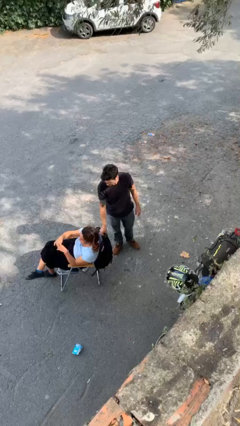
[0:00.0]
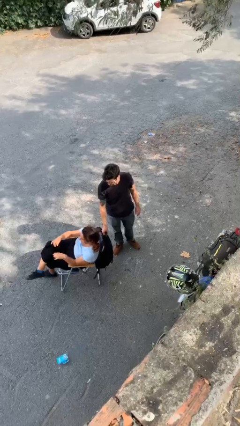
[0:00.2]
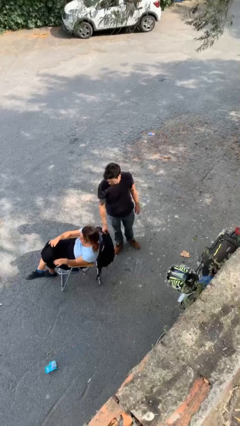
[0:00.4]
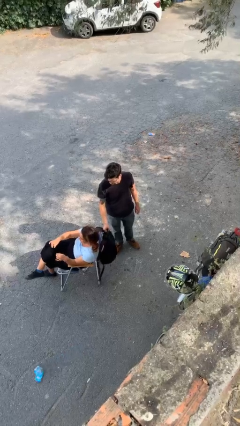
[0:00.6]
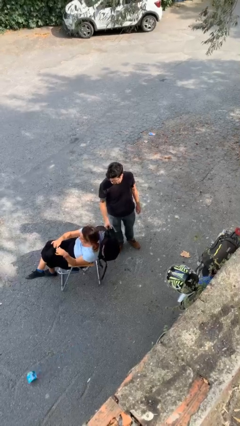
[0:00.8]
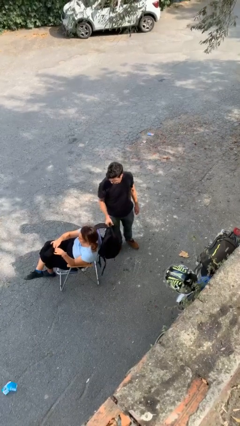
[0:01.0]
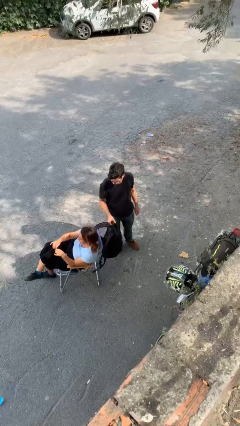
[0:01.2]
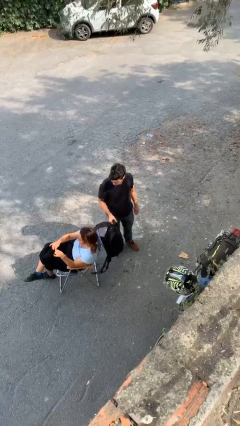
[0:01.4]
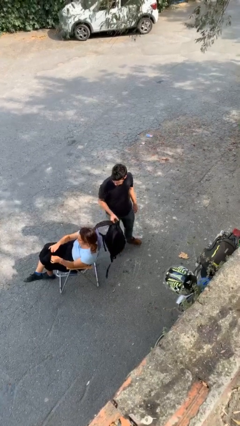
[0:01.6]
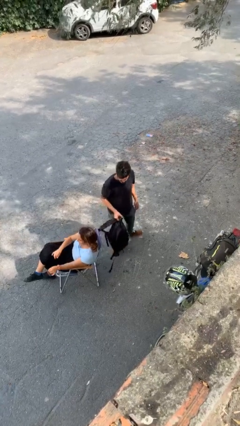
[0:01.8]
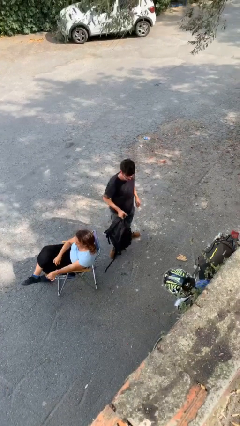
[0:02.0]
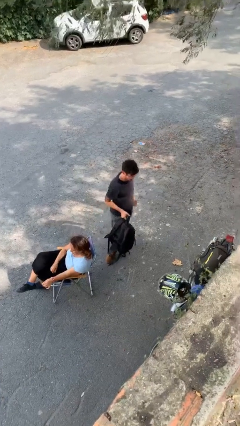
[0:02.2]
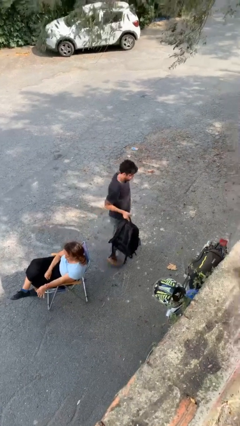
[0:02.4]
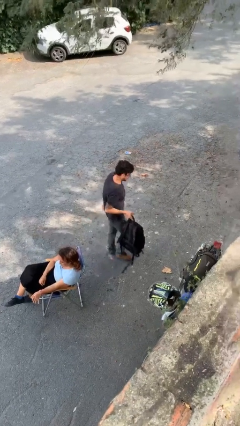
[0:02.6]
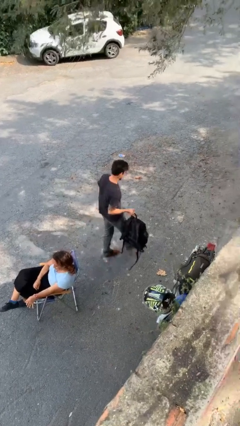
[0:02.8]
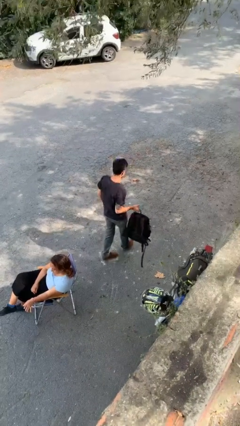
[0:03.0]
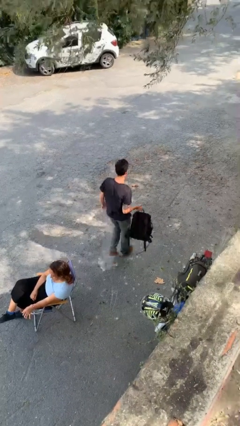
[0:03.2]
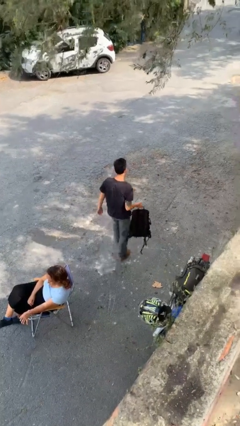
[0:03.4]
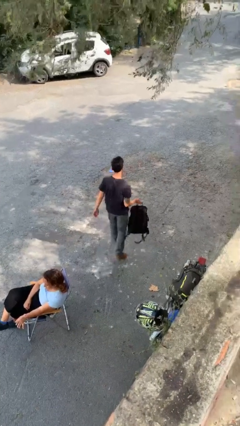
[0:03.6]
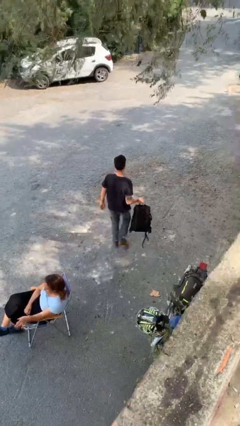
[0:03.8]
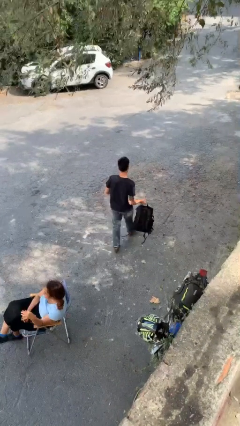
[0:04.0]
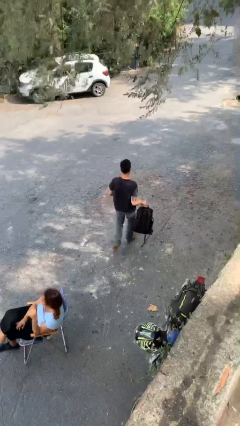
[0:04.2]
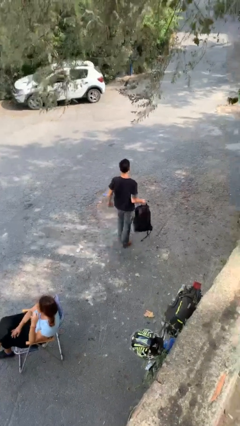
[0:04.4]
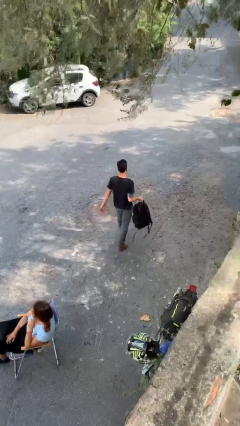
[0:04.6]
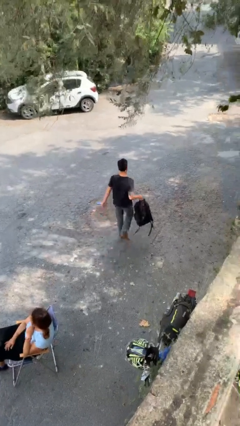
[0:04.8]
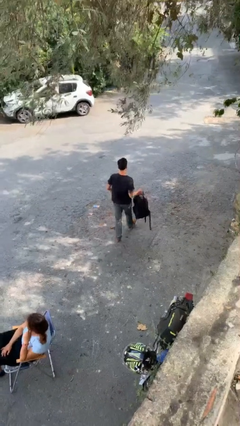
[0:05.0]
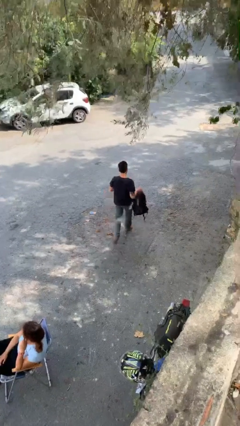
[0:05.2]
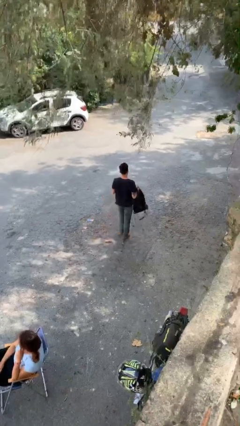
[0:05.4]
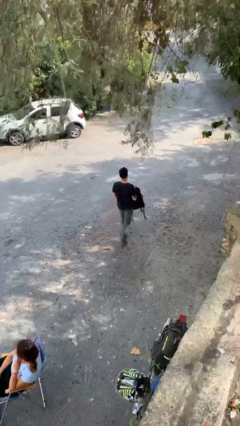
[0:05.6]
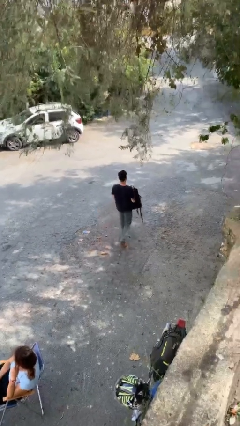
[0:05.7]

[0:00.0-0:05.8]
person steals object from person

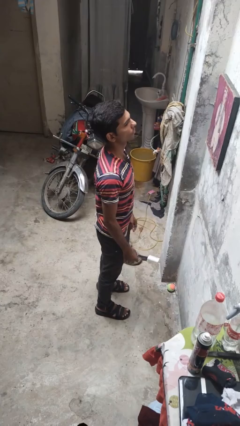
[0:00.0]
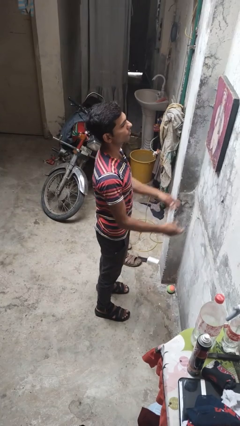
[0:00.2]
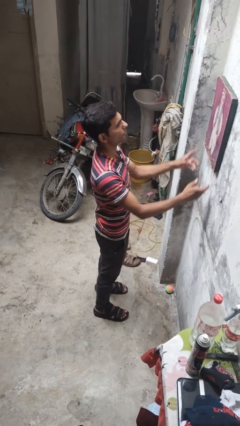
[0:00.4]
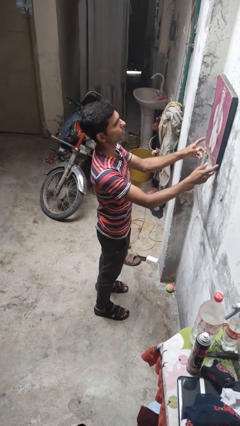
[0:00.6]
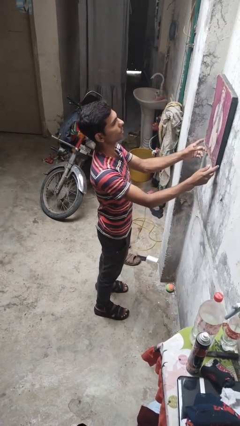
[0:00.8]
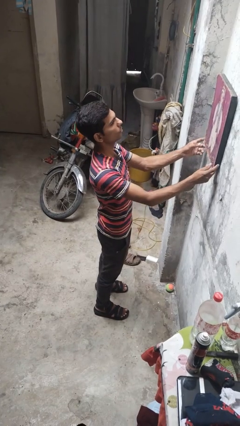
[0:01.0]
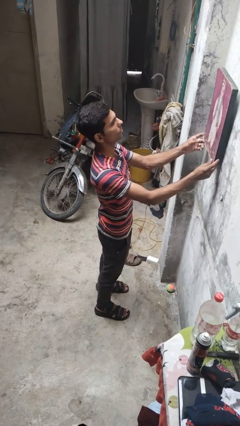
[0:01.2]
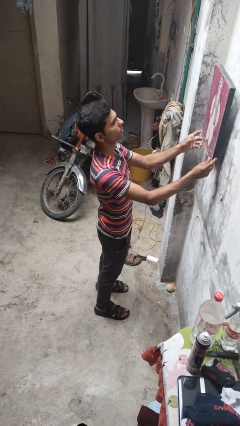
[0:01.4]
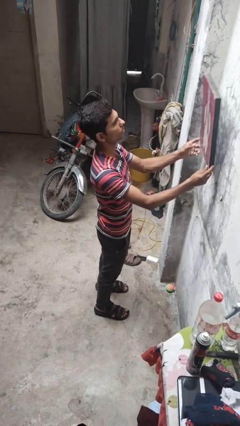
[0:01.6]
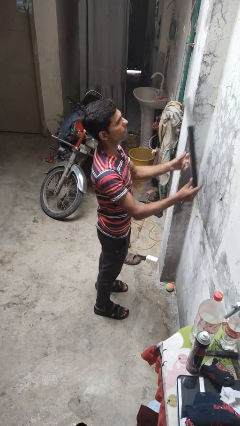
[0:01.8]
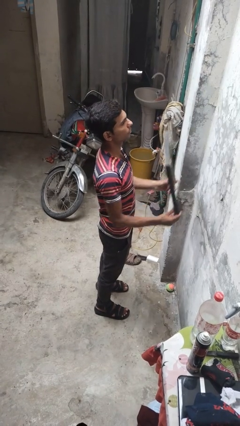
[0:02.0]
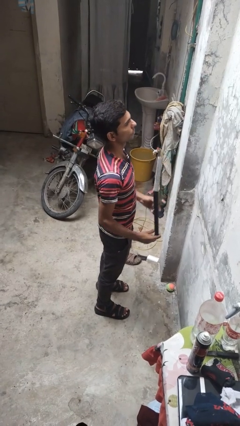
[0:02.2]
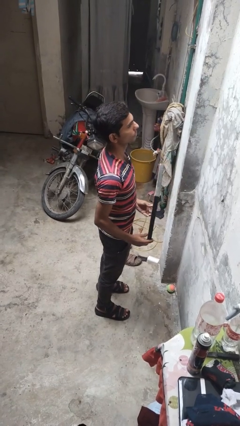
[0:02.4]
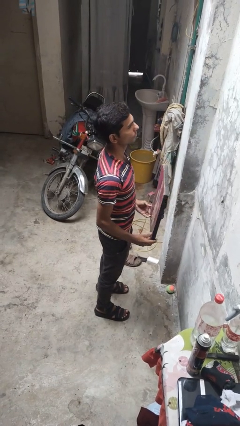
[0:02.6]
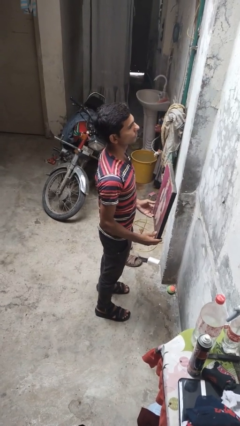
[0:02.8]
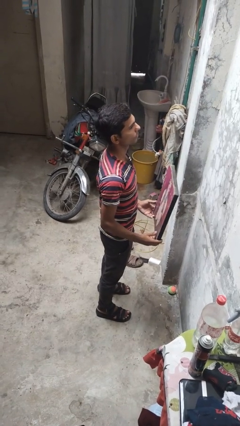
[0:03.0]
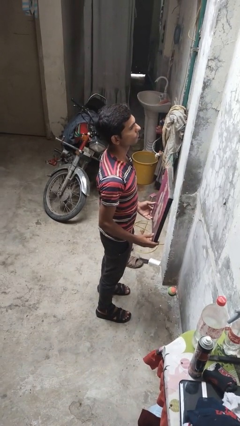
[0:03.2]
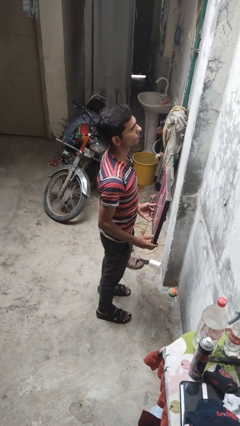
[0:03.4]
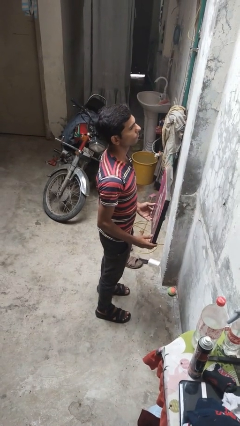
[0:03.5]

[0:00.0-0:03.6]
person takes down picture frame

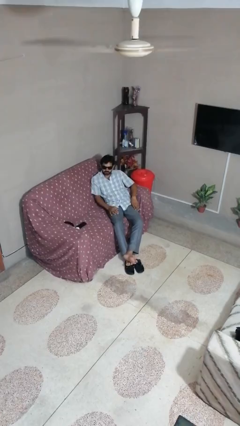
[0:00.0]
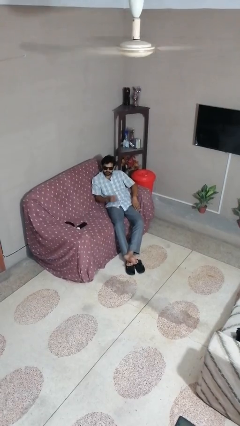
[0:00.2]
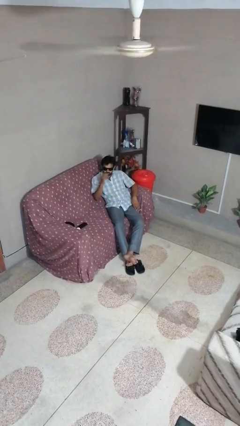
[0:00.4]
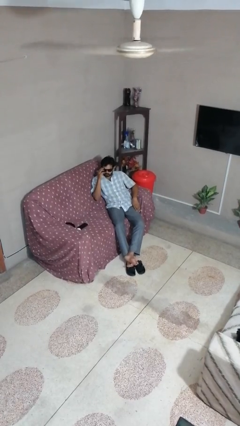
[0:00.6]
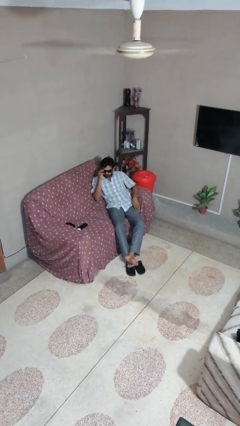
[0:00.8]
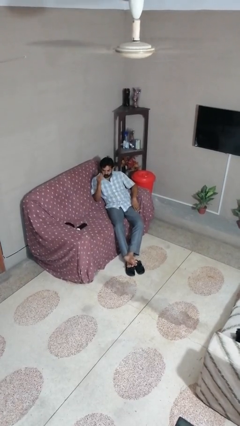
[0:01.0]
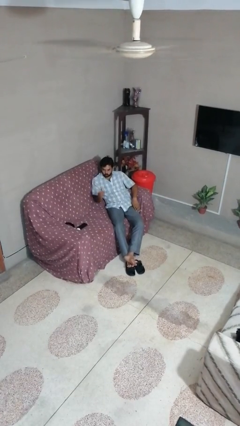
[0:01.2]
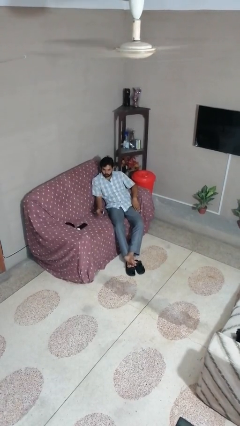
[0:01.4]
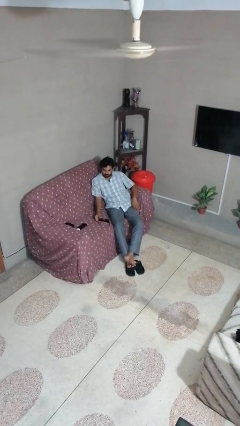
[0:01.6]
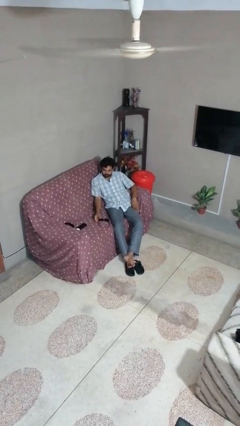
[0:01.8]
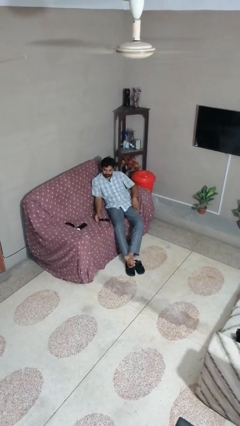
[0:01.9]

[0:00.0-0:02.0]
person takes off sunglasses

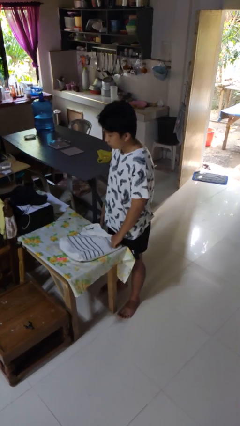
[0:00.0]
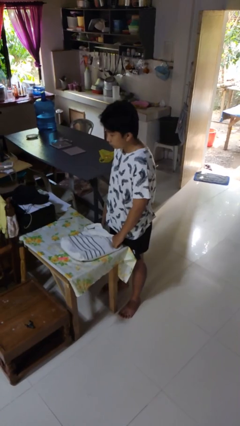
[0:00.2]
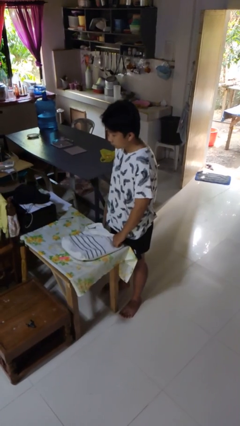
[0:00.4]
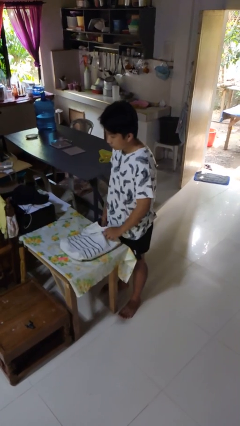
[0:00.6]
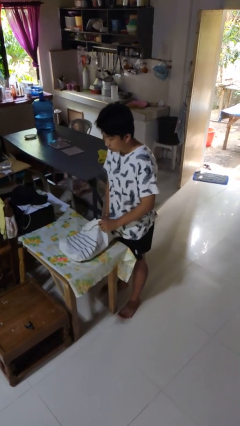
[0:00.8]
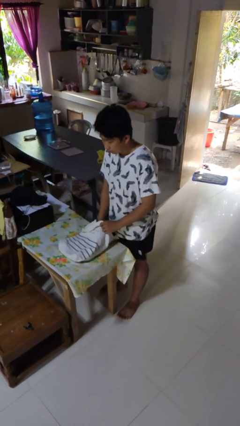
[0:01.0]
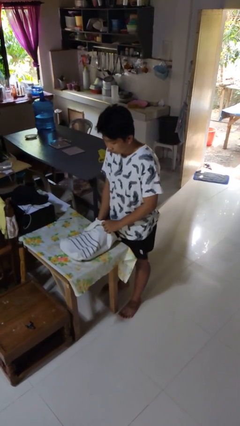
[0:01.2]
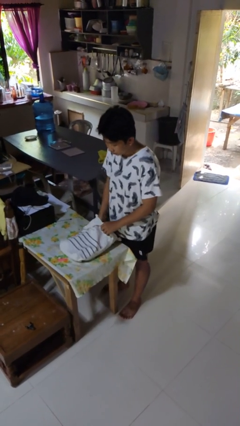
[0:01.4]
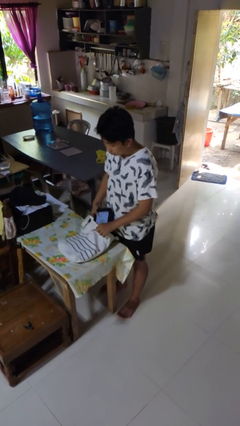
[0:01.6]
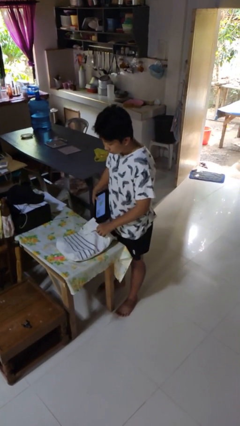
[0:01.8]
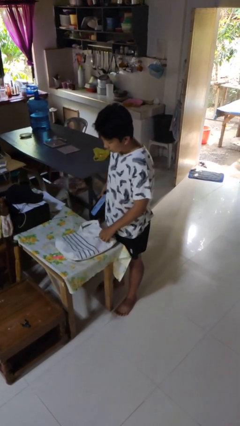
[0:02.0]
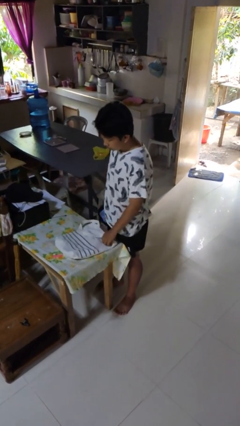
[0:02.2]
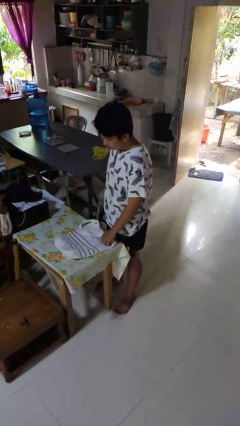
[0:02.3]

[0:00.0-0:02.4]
person takes object from bag

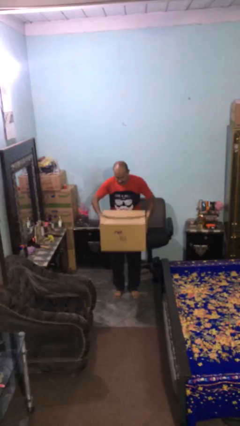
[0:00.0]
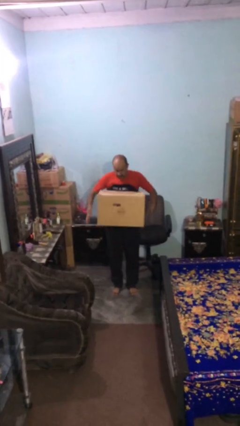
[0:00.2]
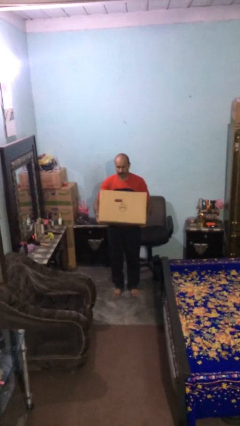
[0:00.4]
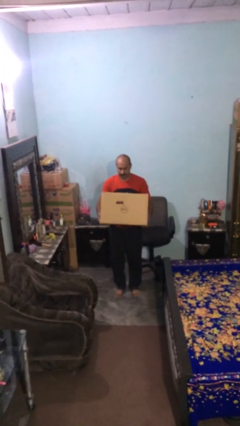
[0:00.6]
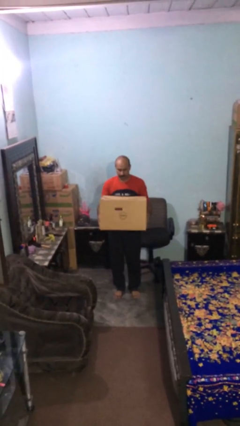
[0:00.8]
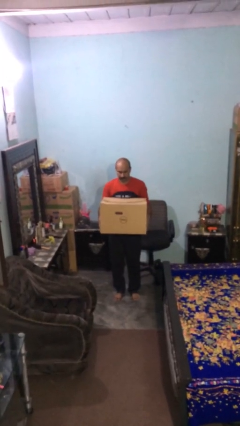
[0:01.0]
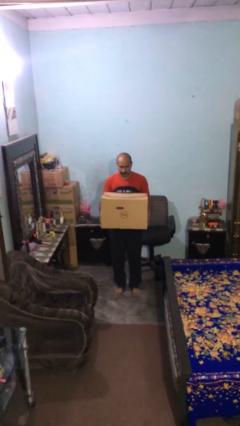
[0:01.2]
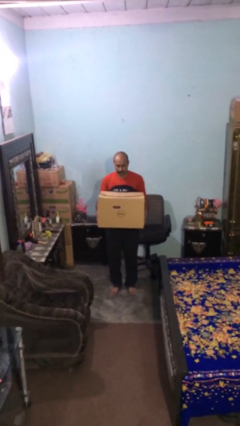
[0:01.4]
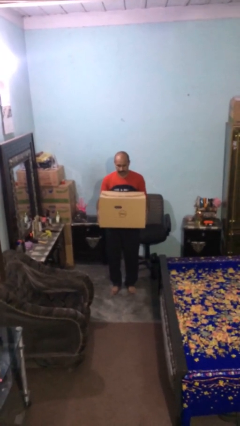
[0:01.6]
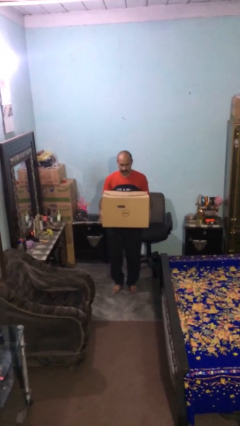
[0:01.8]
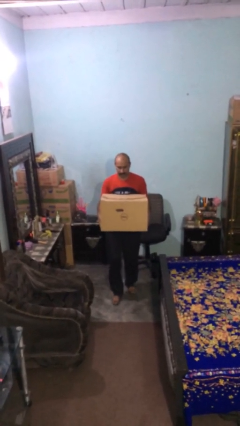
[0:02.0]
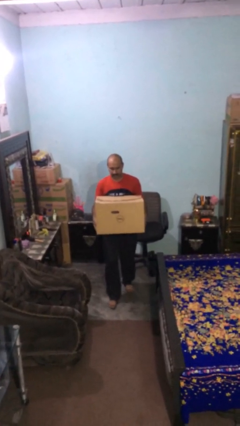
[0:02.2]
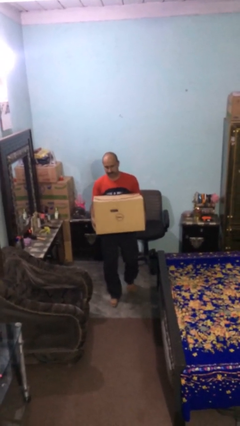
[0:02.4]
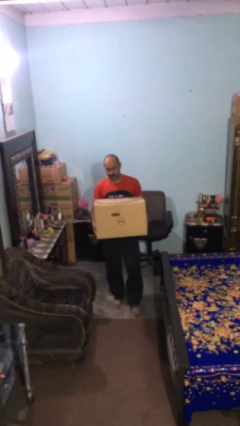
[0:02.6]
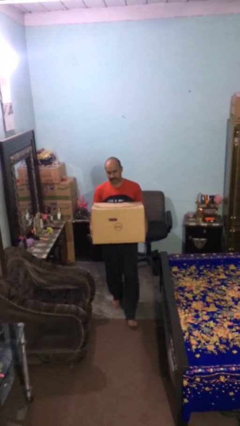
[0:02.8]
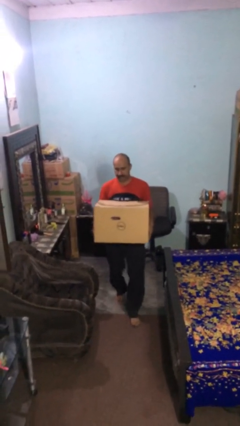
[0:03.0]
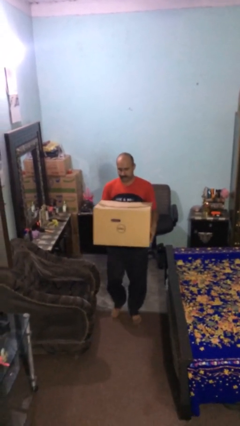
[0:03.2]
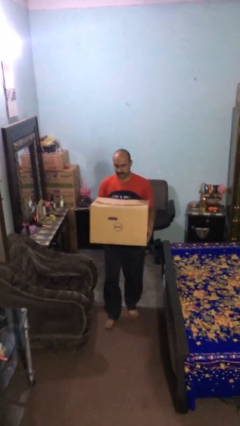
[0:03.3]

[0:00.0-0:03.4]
person carries heavy object

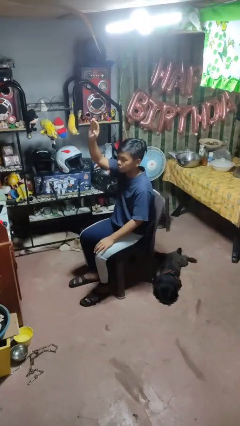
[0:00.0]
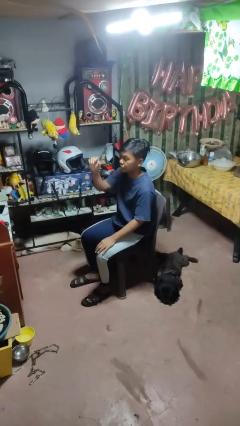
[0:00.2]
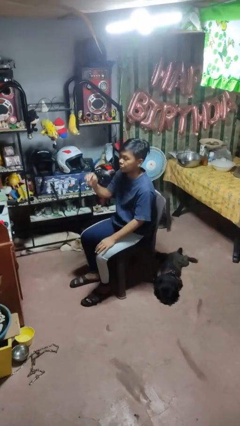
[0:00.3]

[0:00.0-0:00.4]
person gestures lower hand
